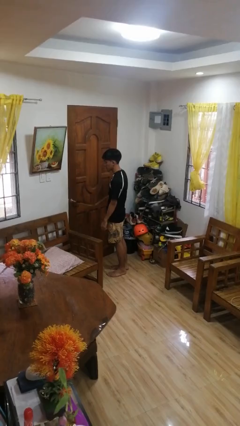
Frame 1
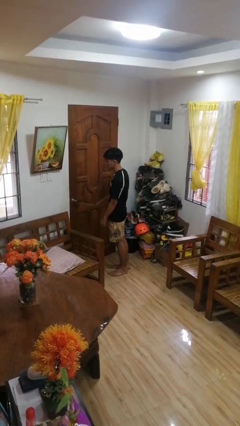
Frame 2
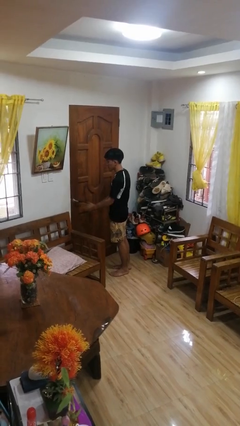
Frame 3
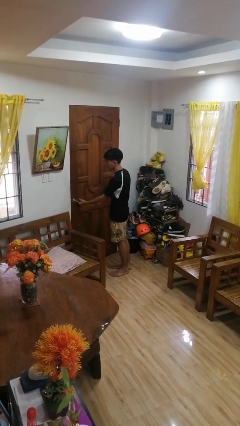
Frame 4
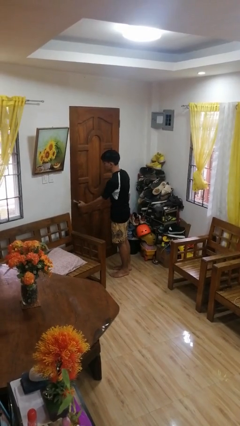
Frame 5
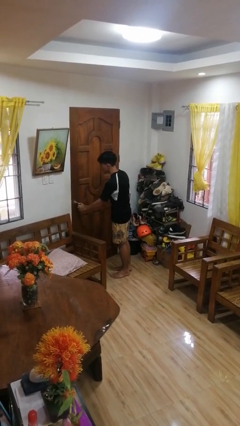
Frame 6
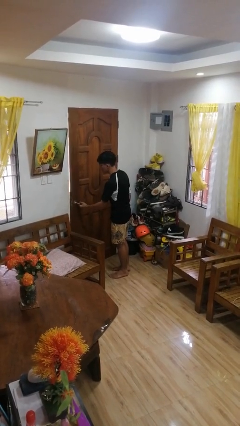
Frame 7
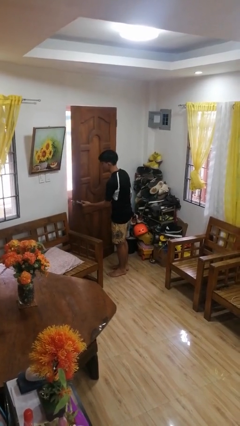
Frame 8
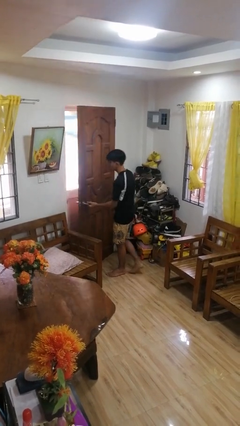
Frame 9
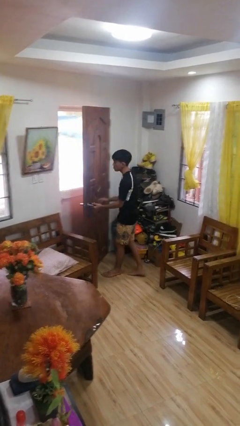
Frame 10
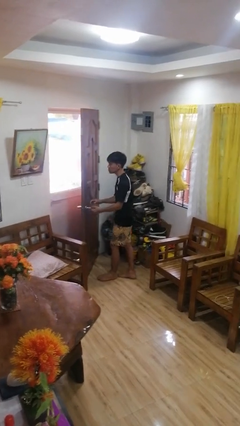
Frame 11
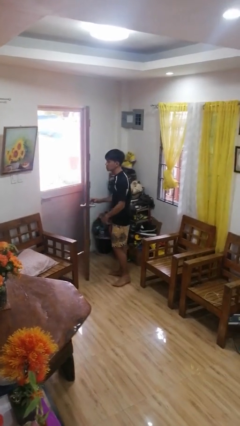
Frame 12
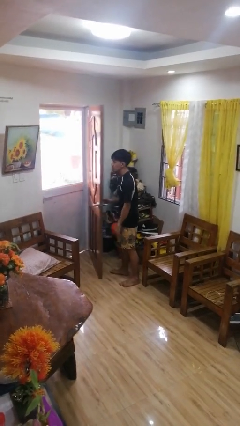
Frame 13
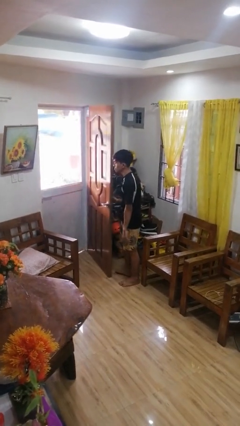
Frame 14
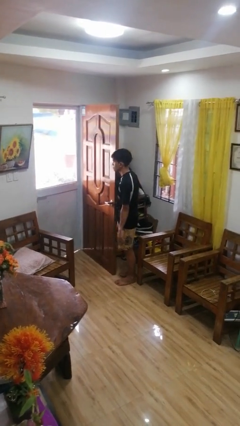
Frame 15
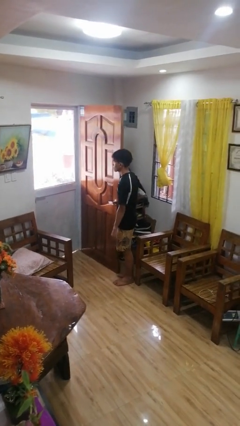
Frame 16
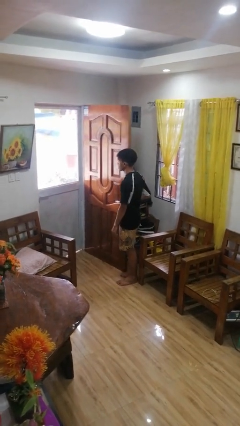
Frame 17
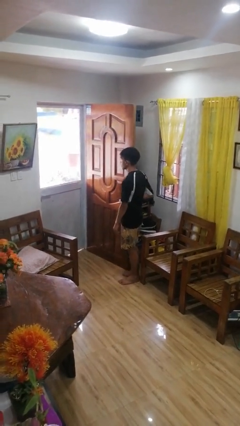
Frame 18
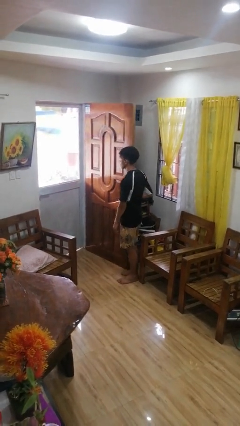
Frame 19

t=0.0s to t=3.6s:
person opens facility door

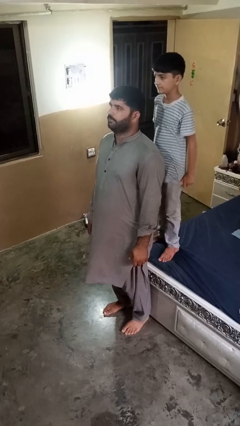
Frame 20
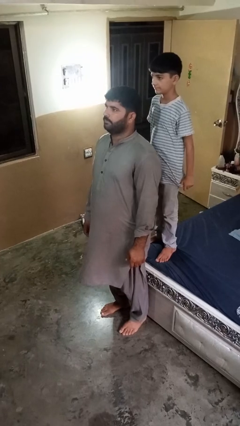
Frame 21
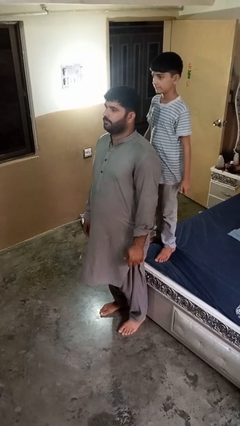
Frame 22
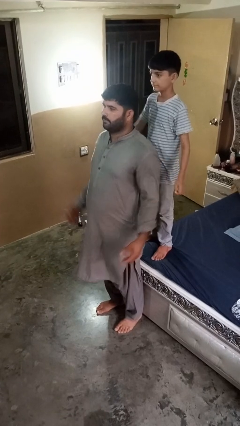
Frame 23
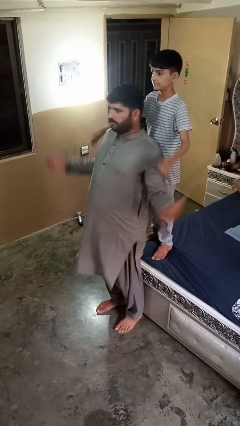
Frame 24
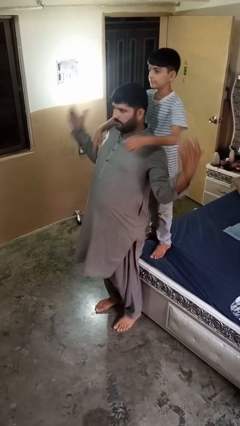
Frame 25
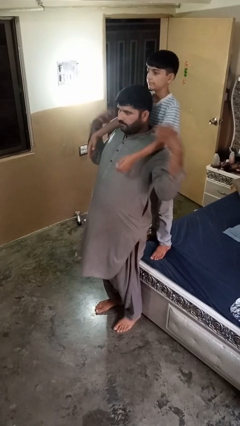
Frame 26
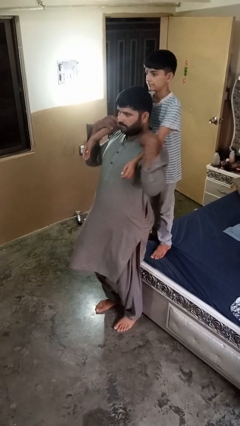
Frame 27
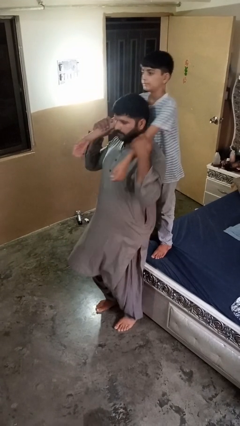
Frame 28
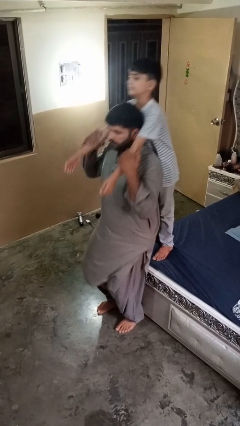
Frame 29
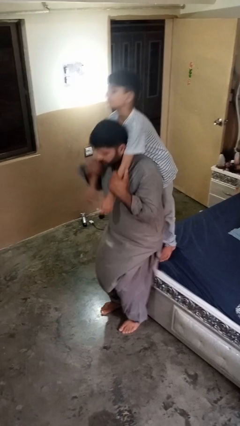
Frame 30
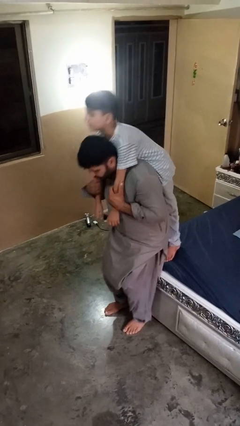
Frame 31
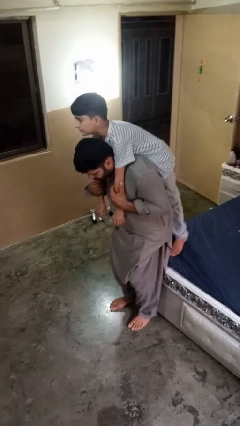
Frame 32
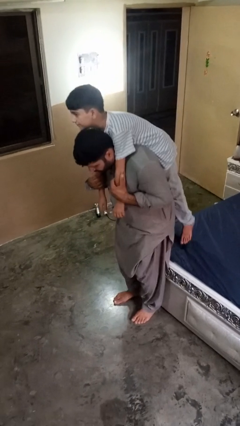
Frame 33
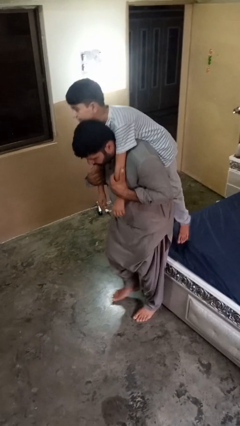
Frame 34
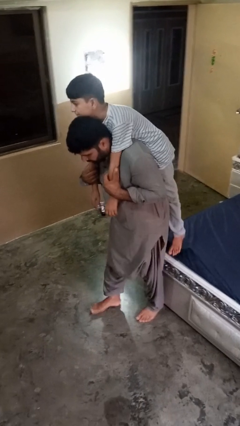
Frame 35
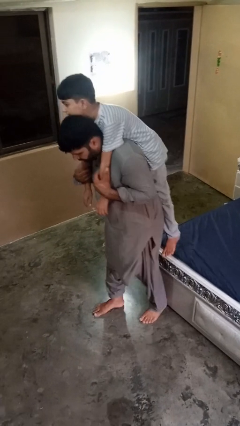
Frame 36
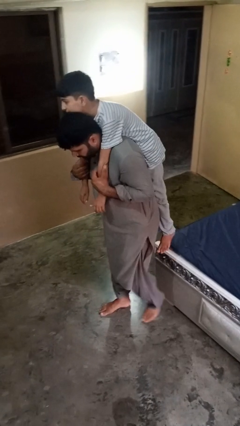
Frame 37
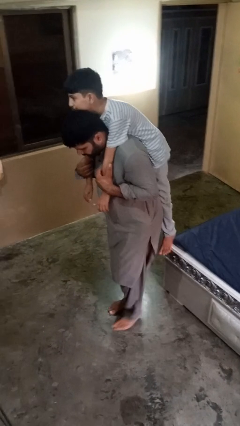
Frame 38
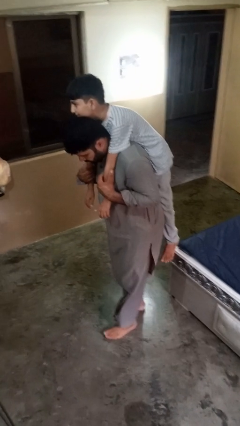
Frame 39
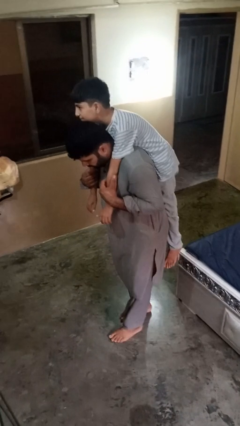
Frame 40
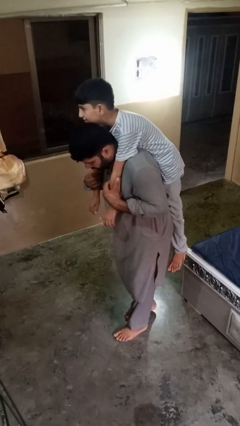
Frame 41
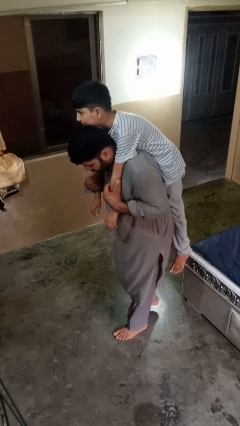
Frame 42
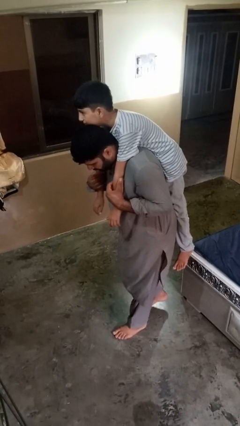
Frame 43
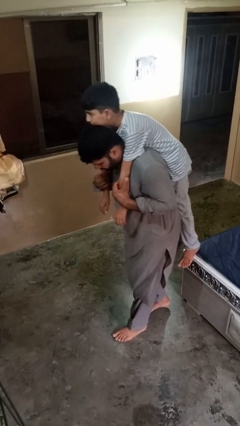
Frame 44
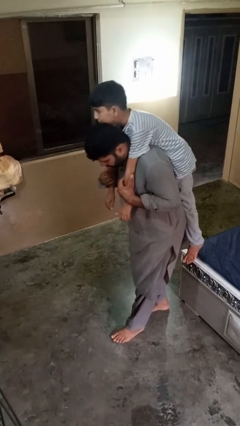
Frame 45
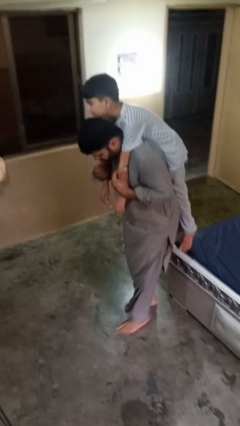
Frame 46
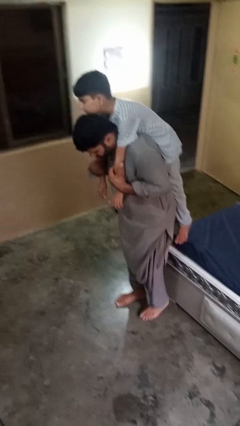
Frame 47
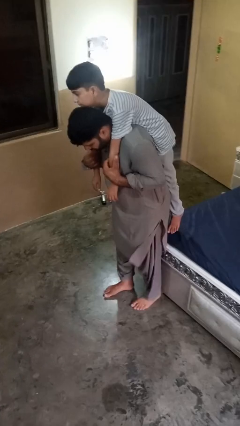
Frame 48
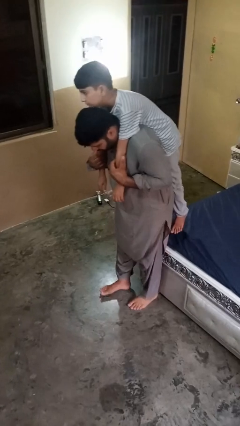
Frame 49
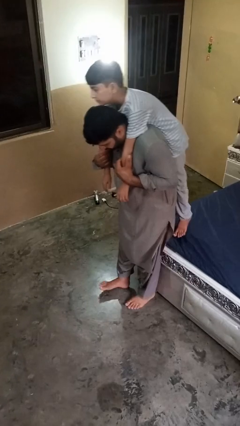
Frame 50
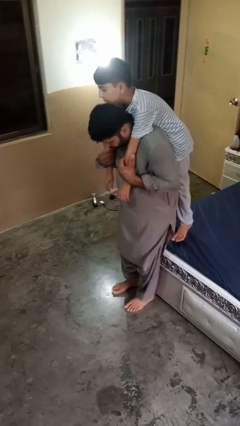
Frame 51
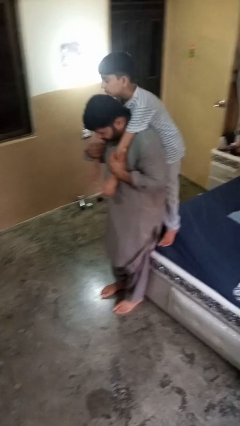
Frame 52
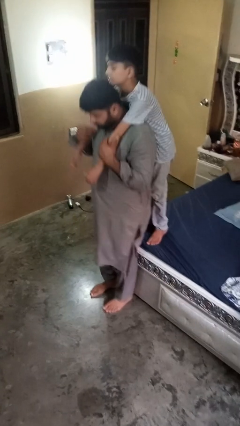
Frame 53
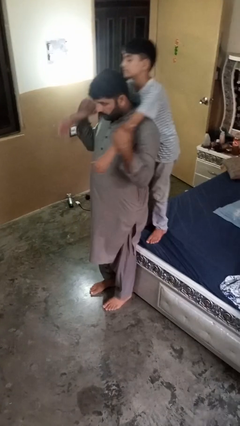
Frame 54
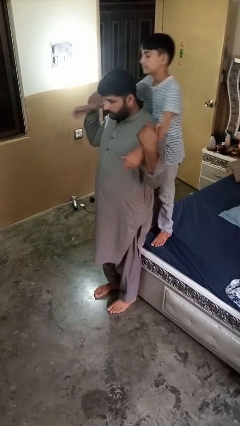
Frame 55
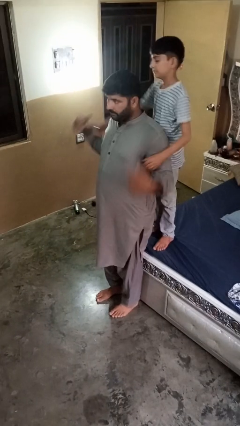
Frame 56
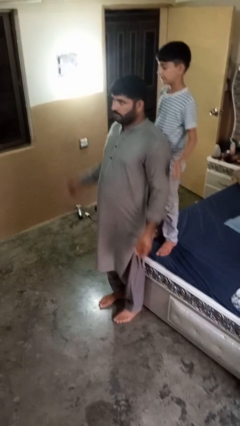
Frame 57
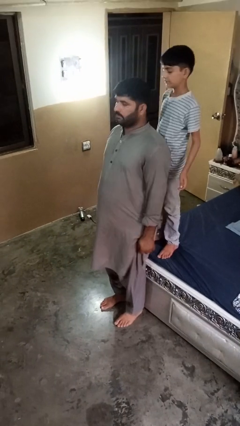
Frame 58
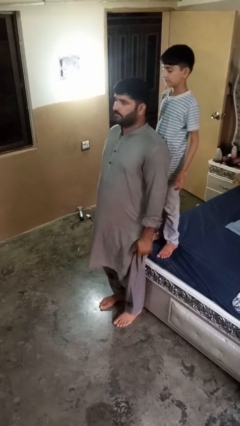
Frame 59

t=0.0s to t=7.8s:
person carries person on back

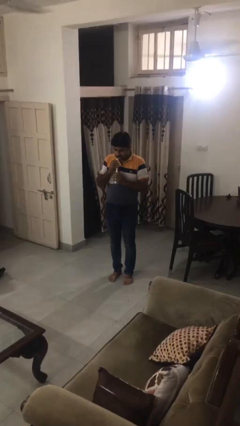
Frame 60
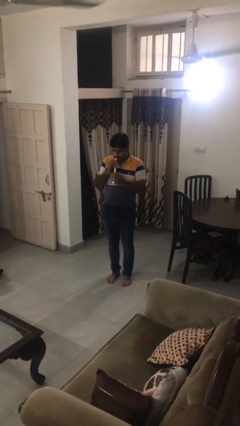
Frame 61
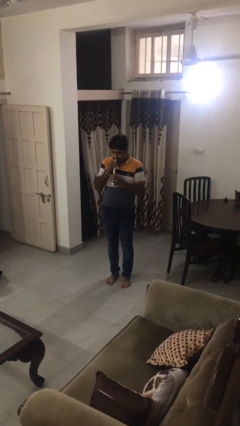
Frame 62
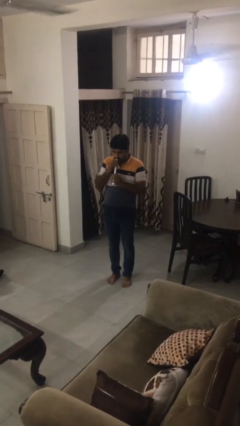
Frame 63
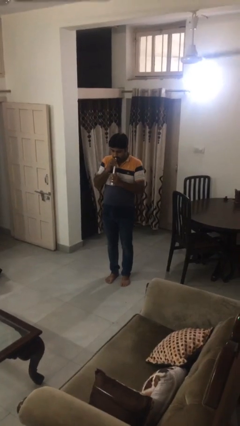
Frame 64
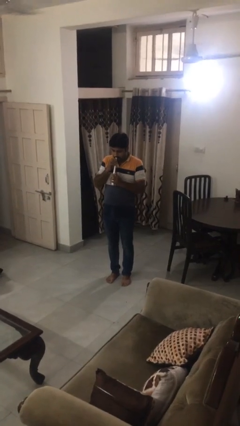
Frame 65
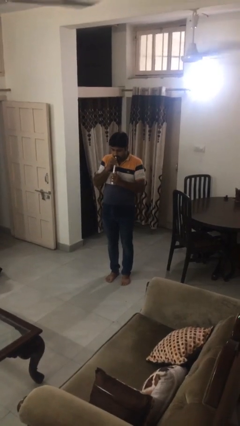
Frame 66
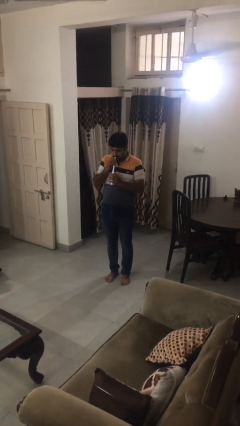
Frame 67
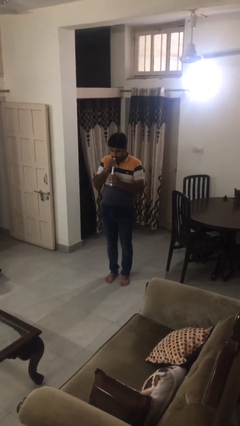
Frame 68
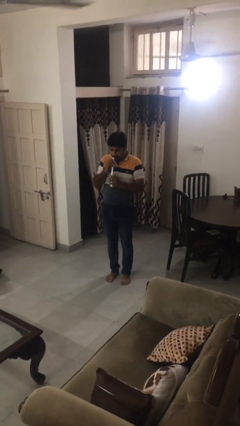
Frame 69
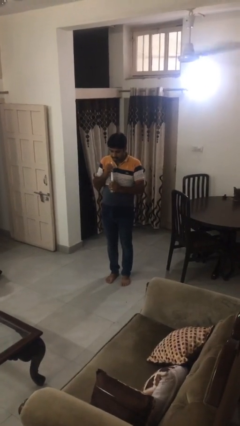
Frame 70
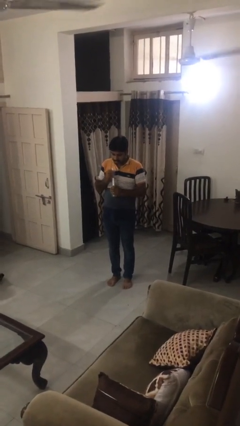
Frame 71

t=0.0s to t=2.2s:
person drinks from straw

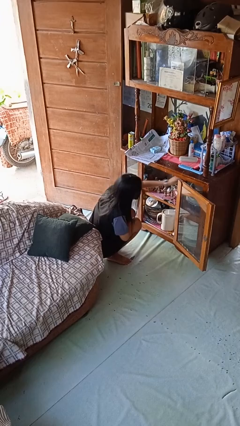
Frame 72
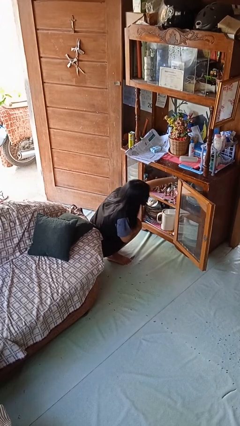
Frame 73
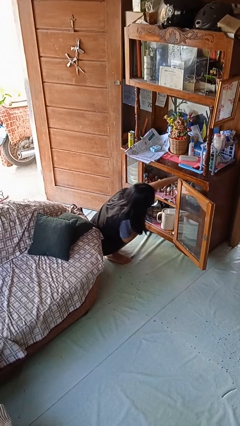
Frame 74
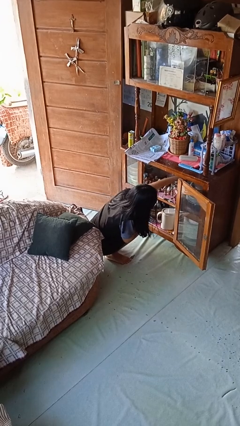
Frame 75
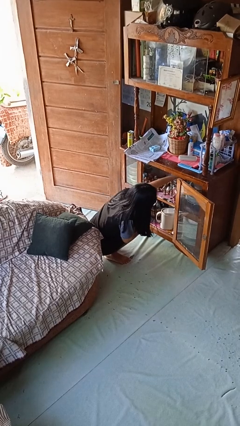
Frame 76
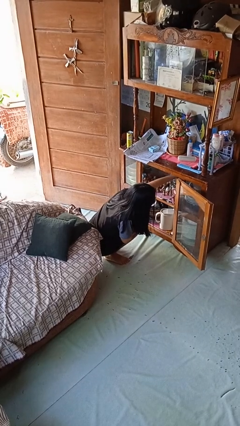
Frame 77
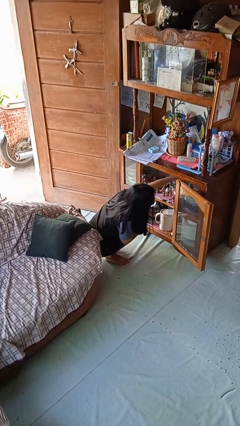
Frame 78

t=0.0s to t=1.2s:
person searches in cabinet

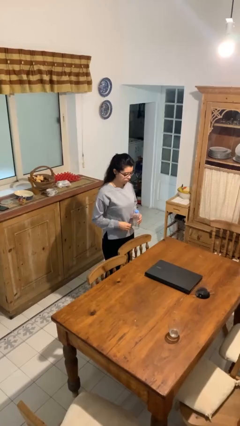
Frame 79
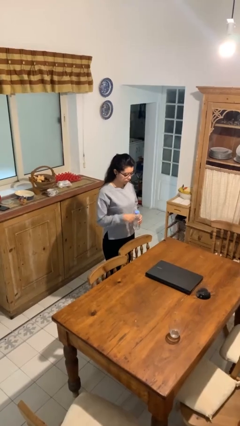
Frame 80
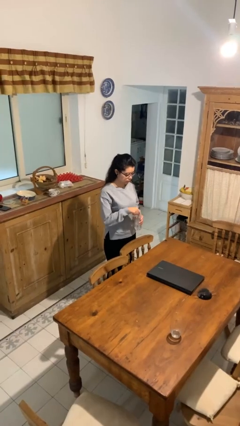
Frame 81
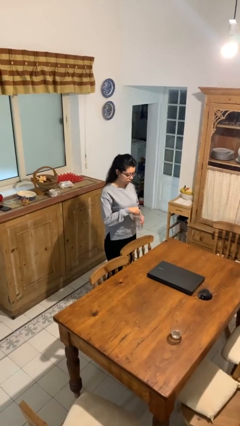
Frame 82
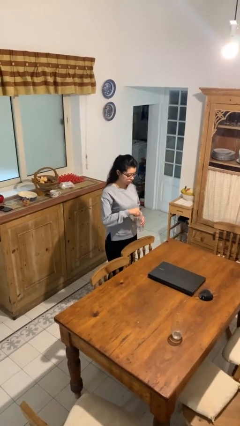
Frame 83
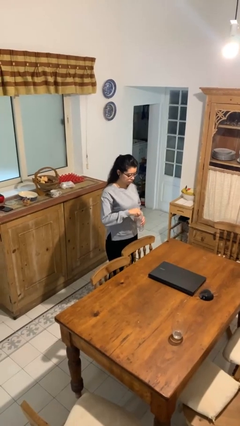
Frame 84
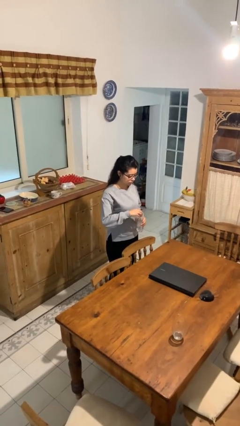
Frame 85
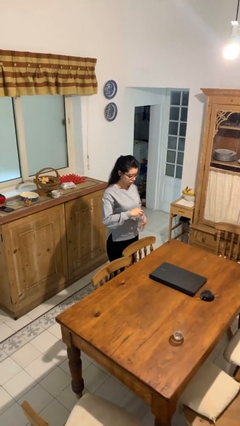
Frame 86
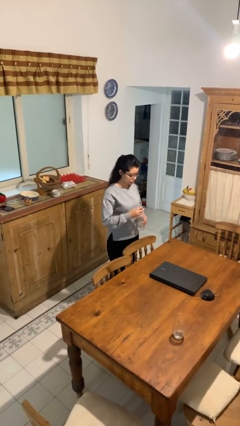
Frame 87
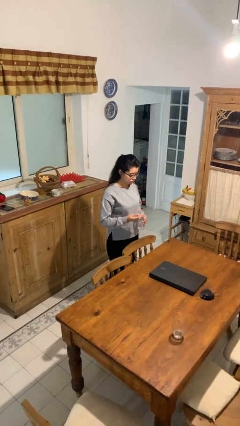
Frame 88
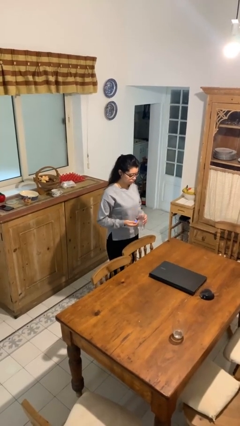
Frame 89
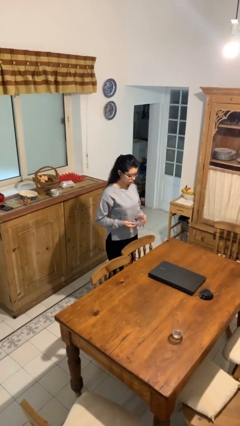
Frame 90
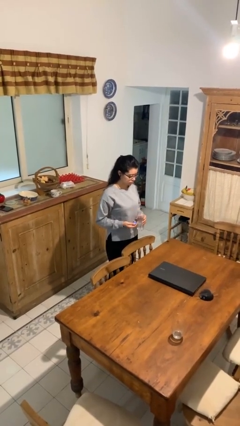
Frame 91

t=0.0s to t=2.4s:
person unscrews lid from bottle
